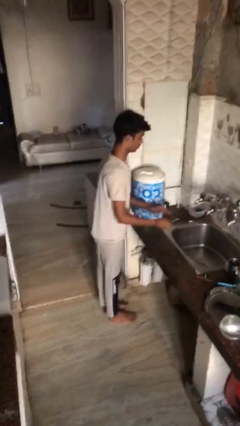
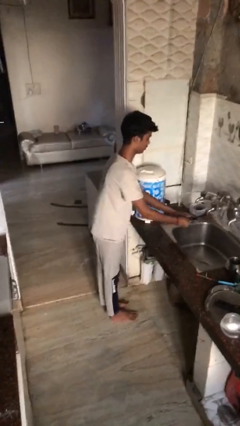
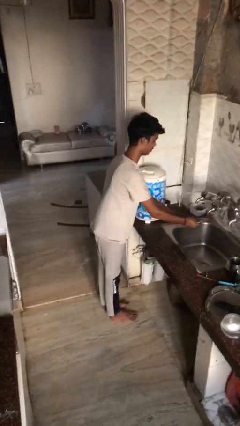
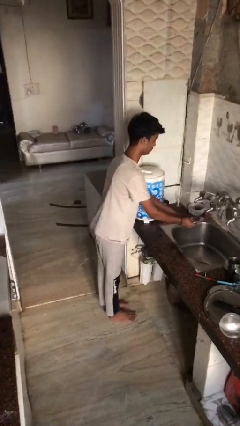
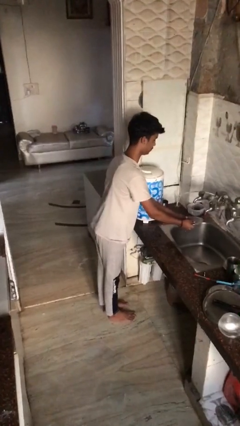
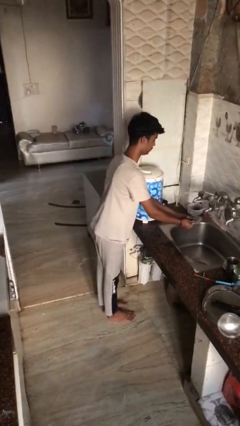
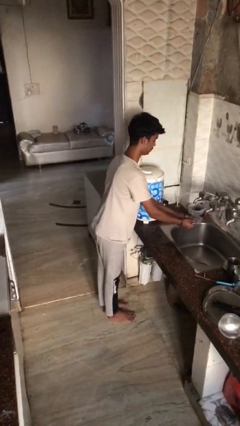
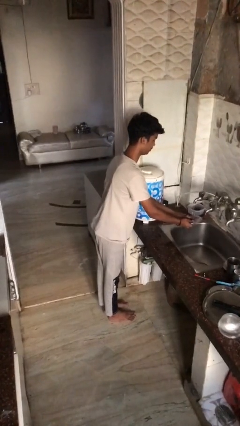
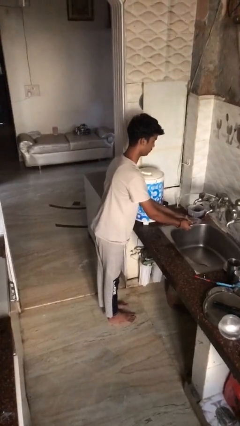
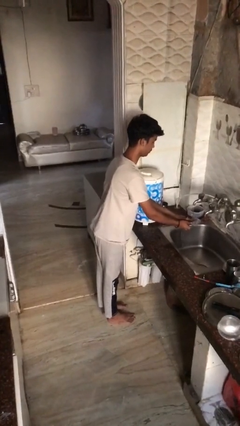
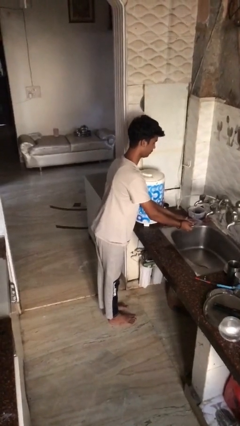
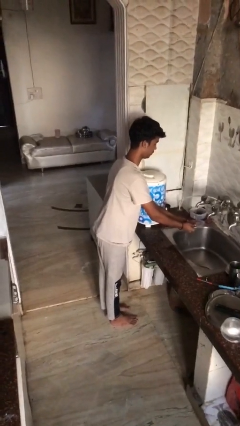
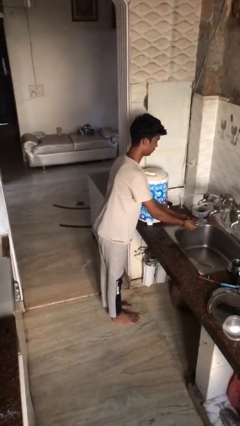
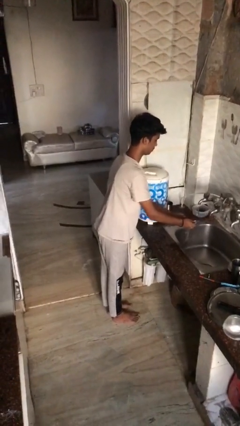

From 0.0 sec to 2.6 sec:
person washes dish

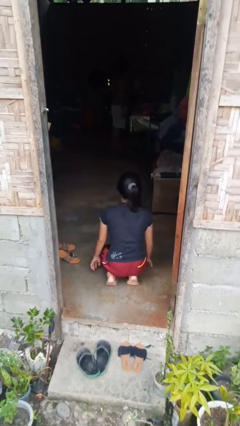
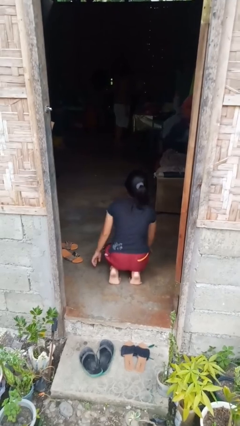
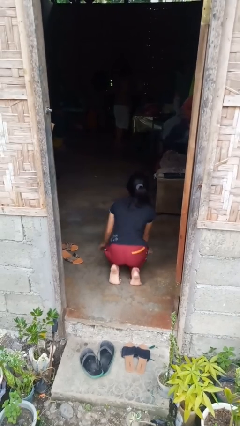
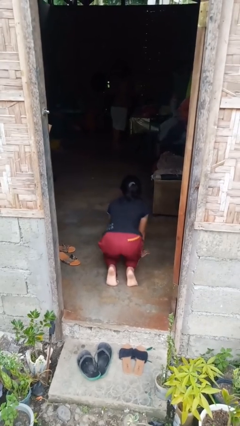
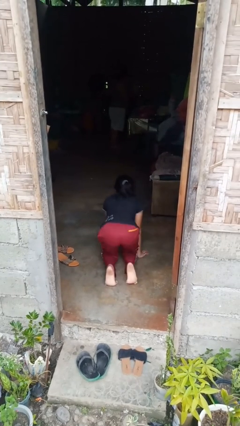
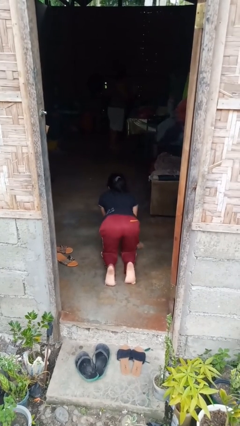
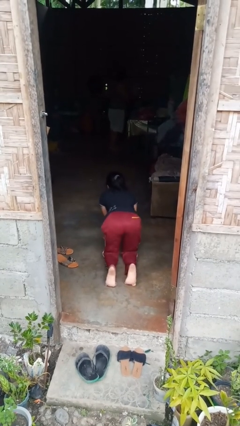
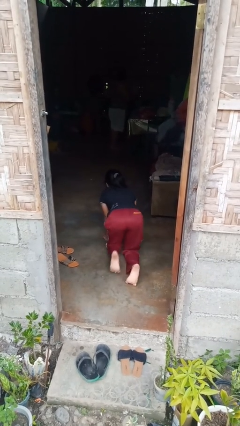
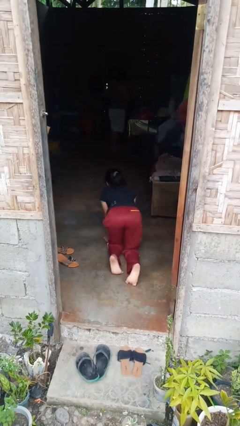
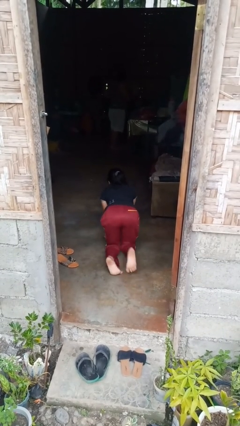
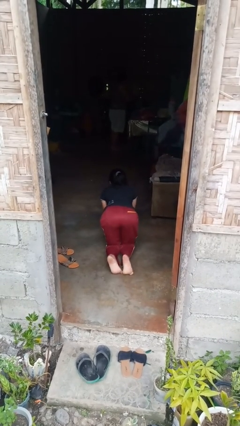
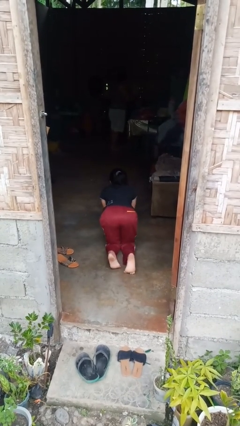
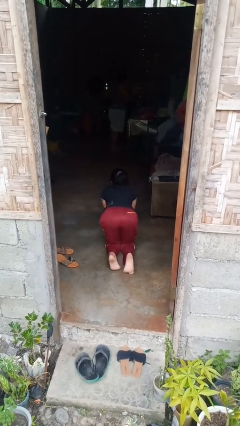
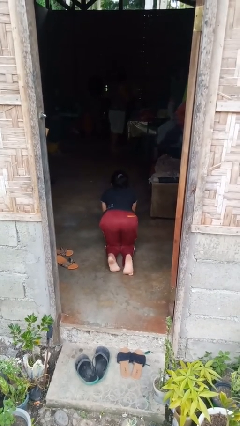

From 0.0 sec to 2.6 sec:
person crawls

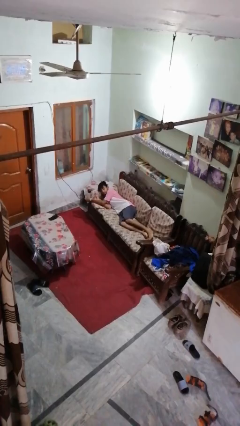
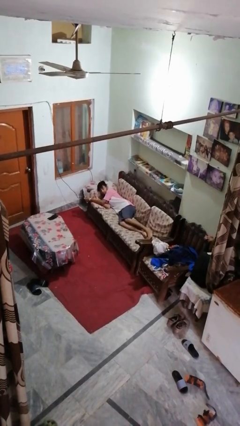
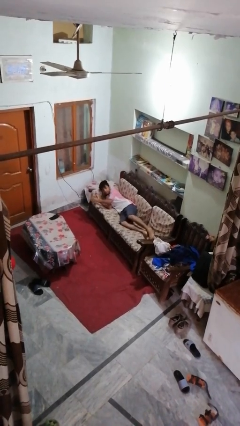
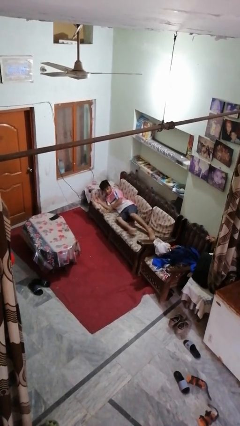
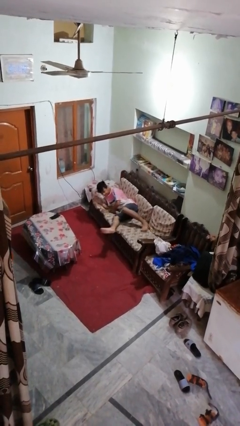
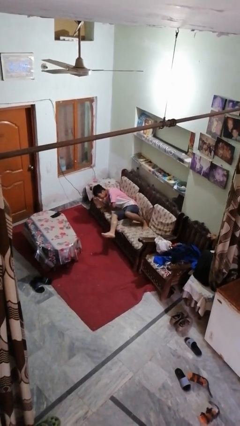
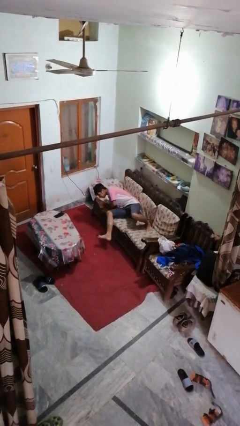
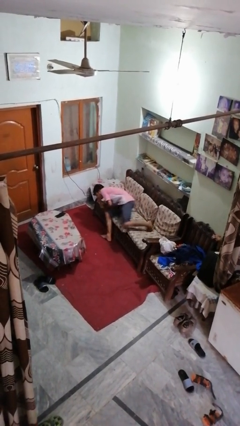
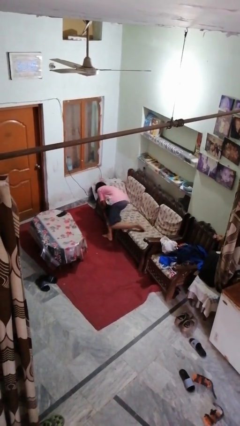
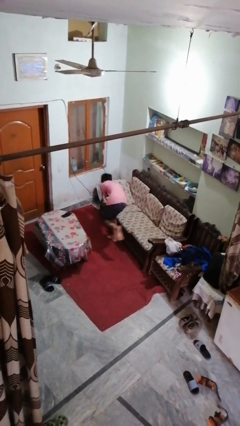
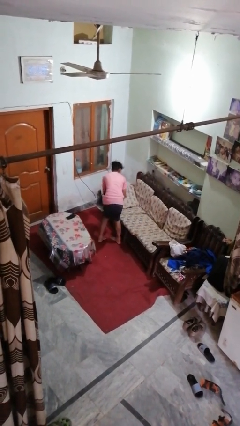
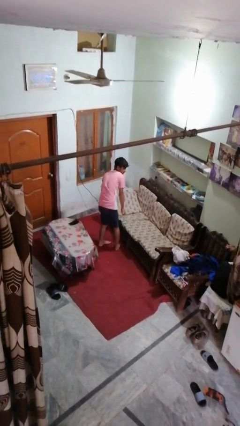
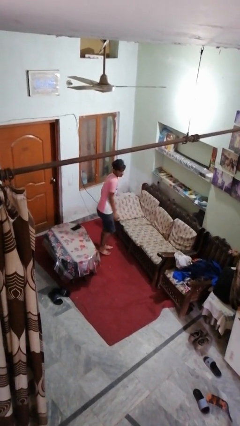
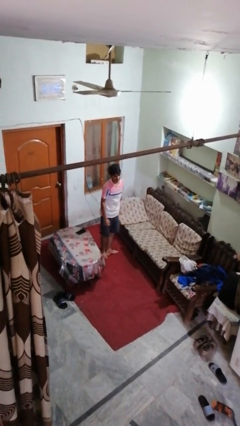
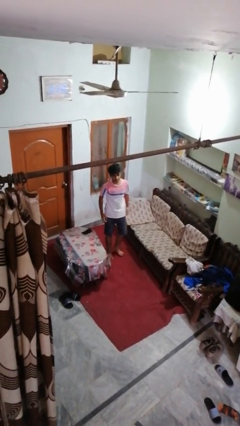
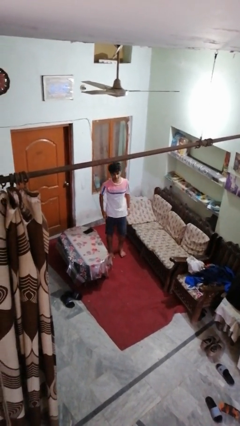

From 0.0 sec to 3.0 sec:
person stands up

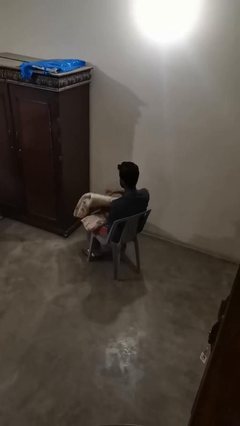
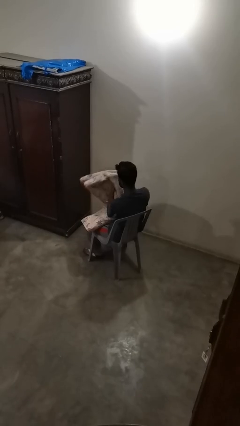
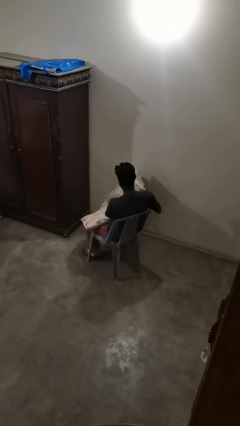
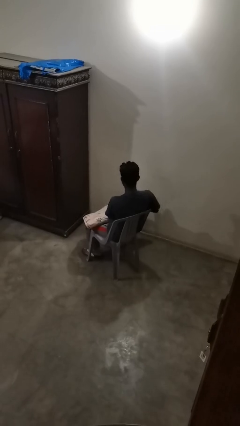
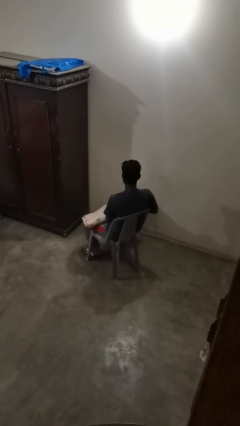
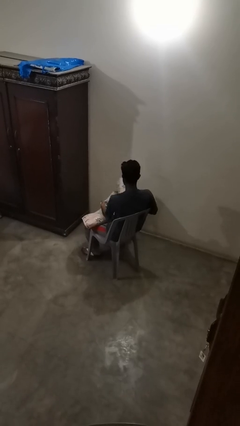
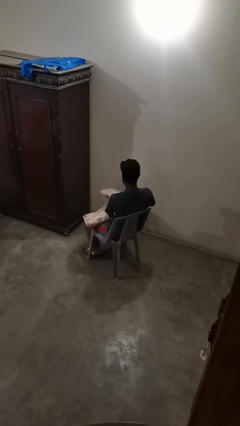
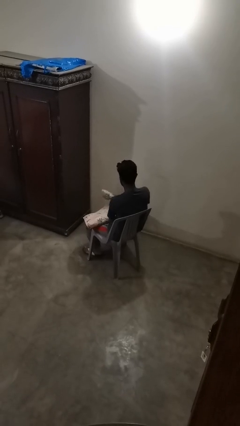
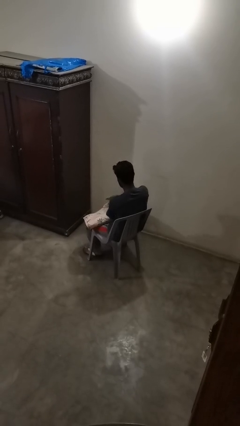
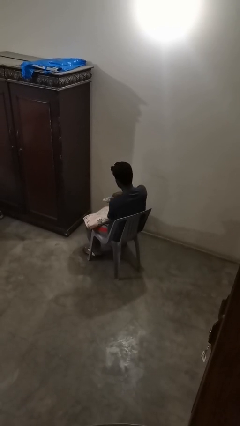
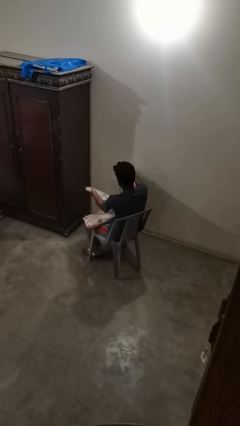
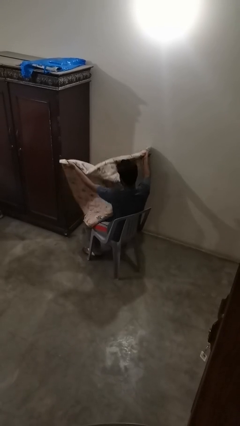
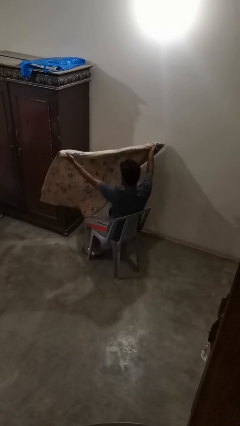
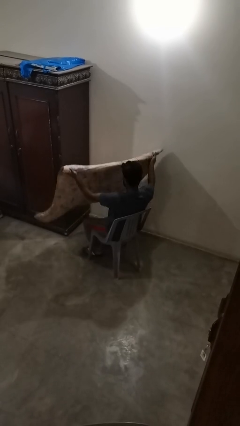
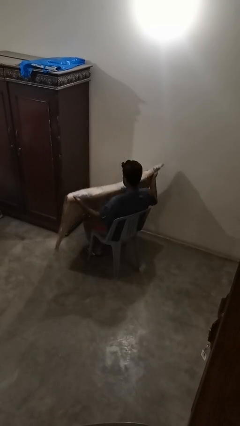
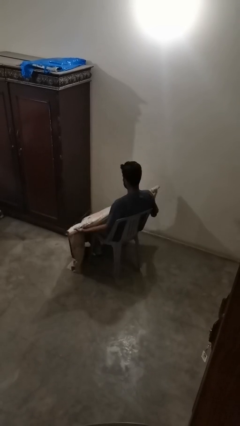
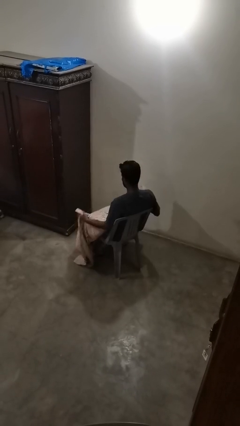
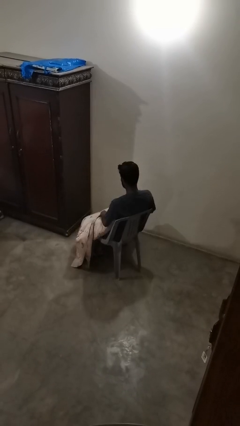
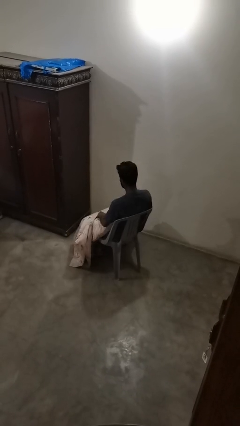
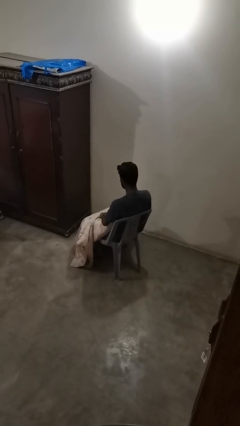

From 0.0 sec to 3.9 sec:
person unfolds blanket

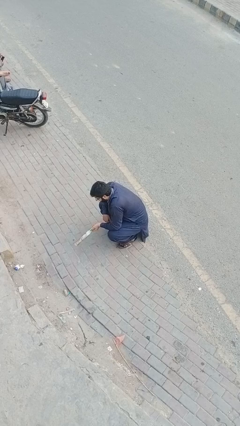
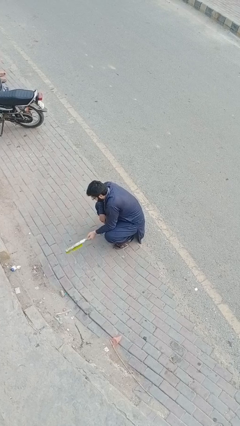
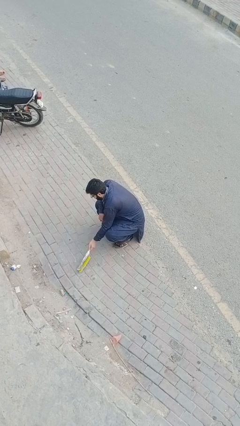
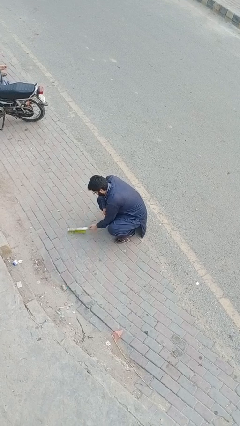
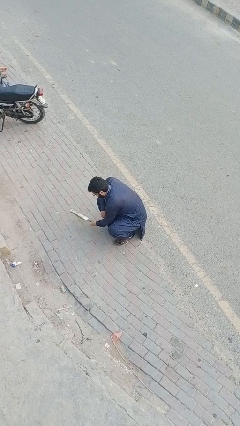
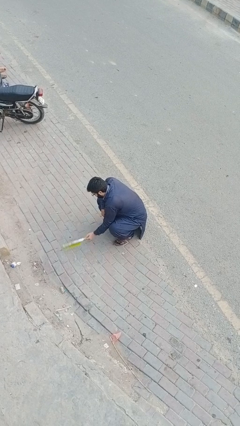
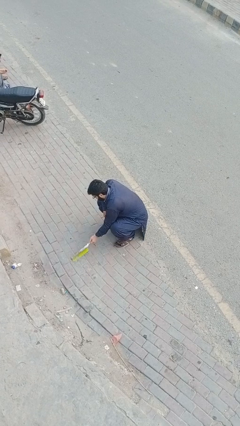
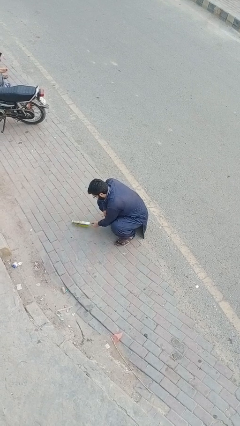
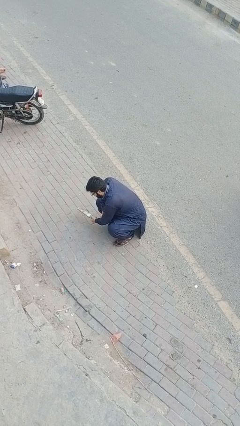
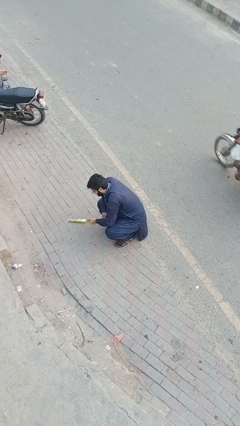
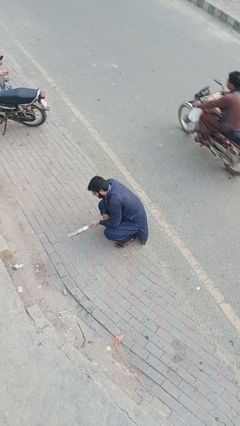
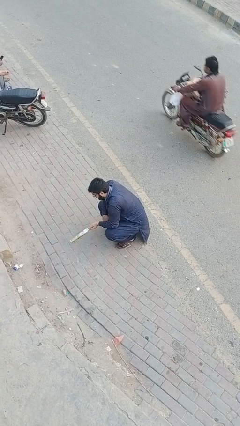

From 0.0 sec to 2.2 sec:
person sweeps floor

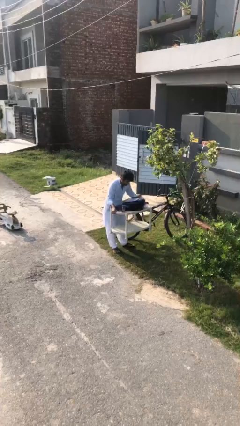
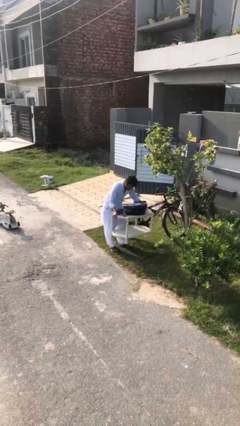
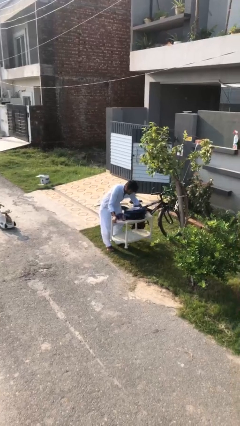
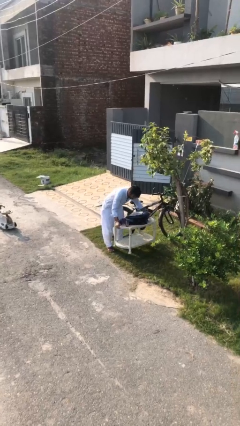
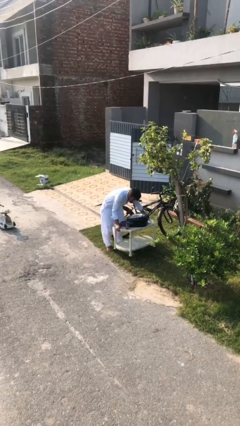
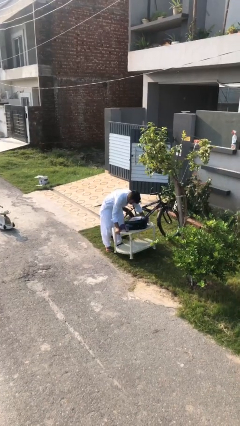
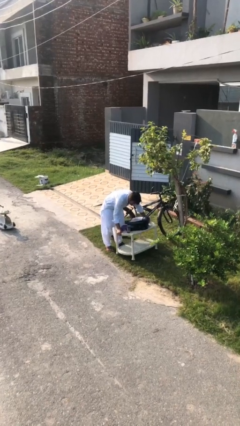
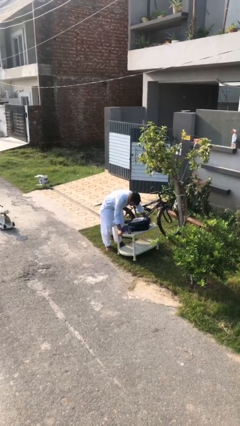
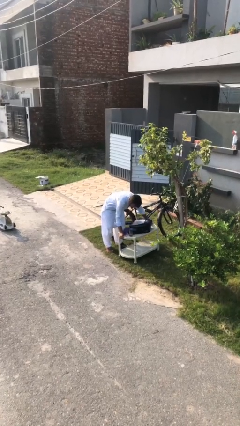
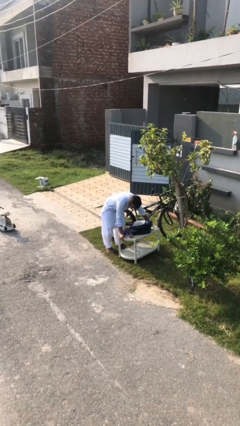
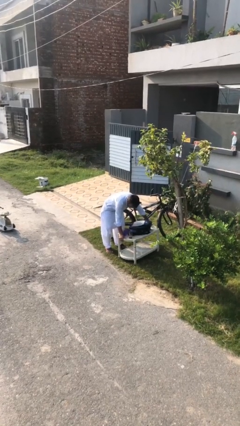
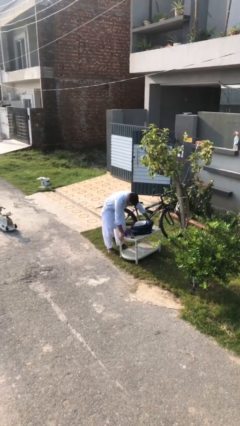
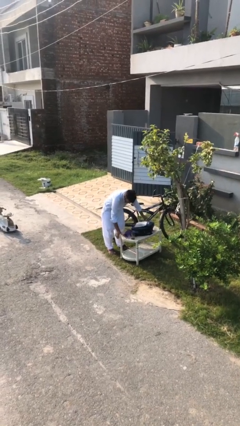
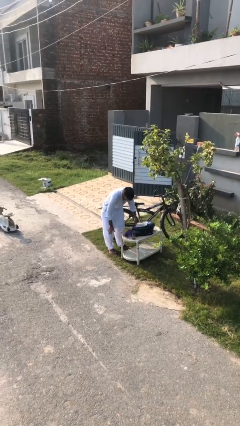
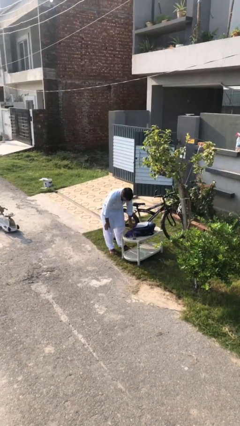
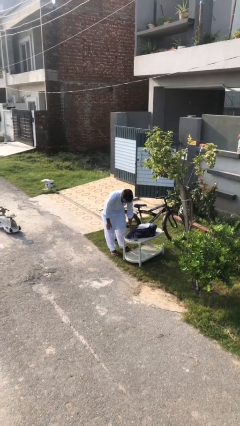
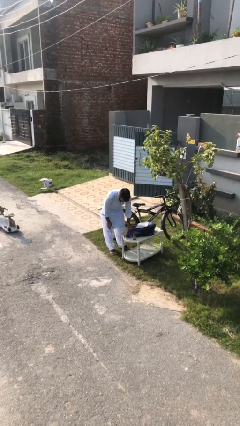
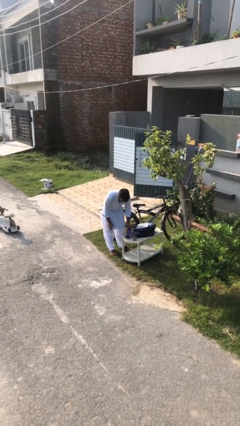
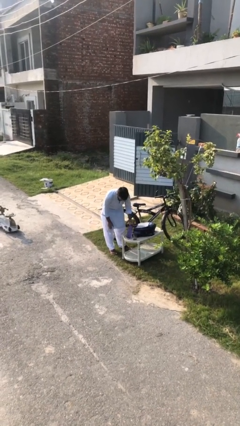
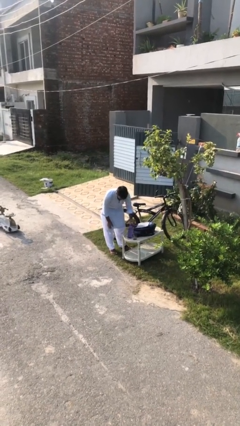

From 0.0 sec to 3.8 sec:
person puts down object on floor
